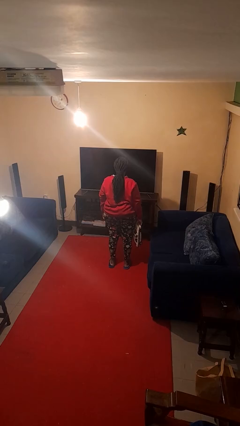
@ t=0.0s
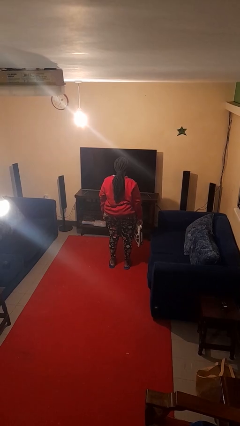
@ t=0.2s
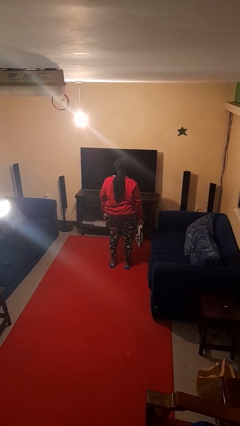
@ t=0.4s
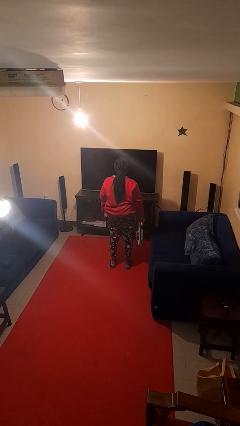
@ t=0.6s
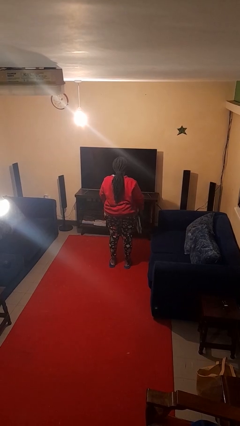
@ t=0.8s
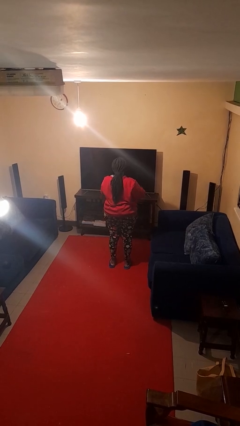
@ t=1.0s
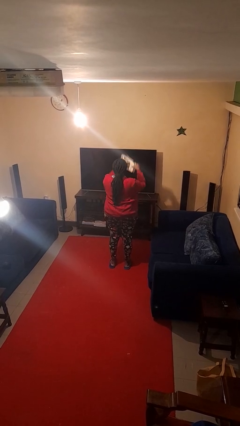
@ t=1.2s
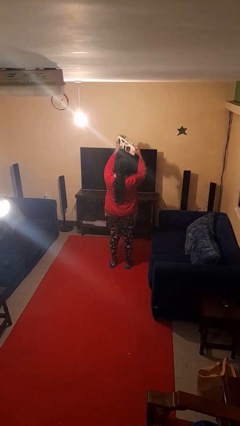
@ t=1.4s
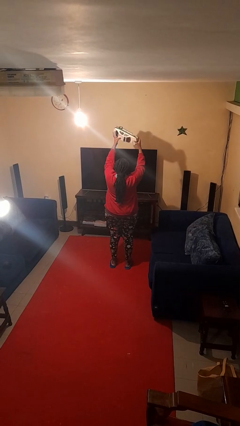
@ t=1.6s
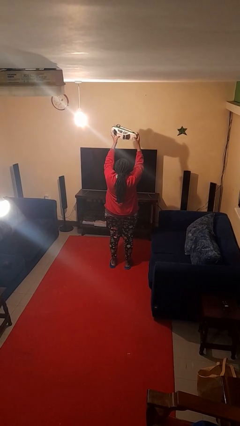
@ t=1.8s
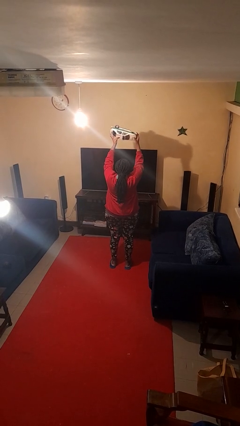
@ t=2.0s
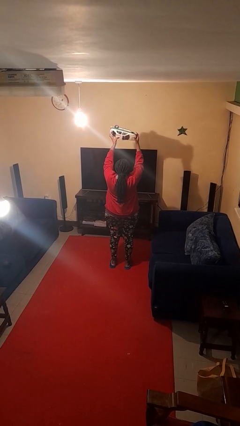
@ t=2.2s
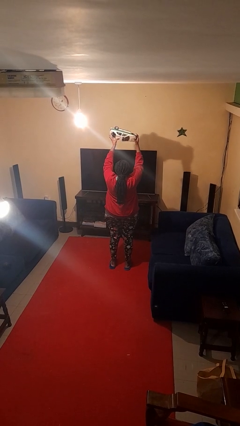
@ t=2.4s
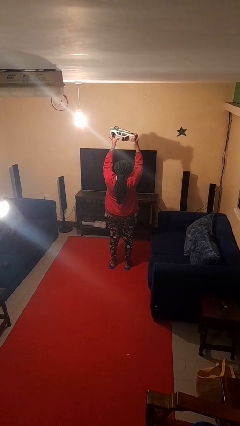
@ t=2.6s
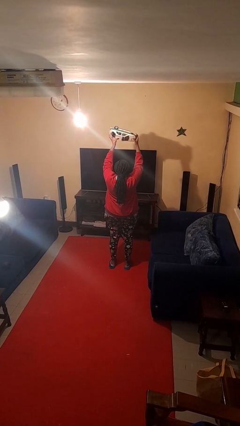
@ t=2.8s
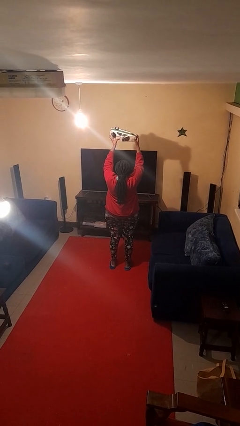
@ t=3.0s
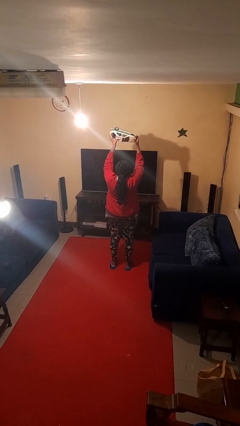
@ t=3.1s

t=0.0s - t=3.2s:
person holds object above head

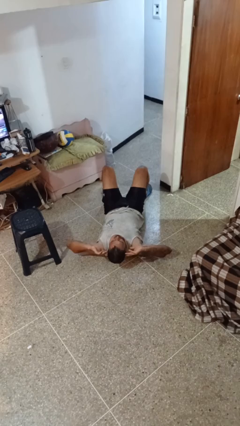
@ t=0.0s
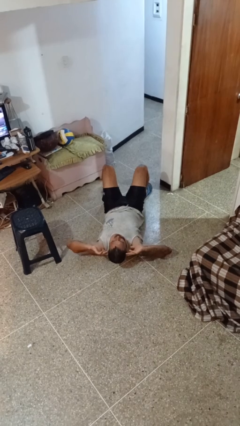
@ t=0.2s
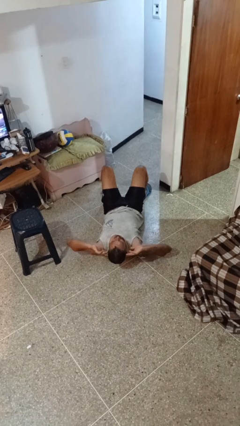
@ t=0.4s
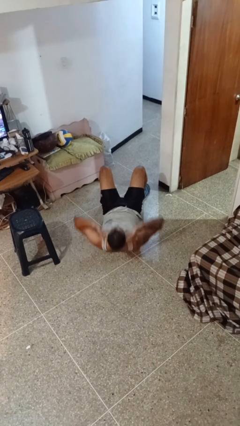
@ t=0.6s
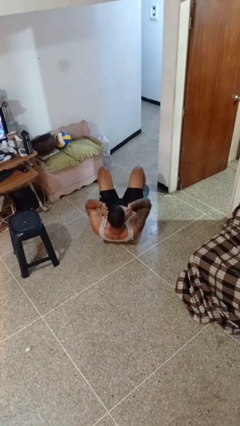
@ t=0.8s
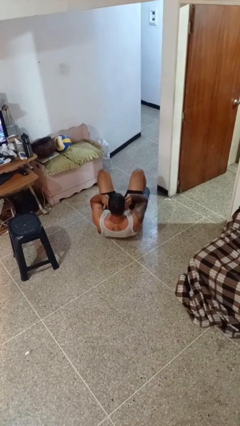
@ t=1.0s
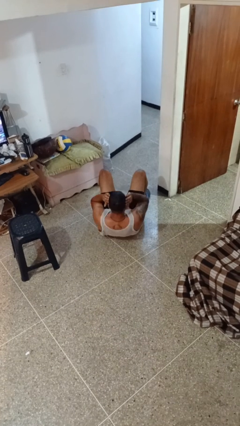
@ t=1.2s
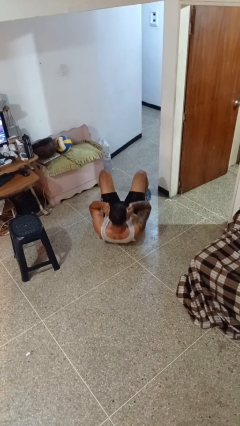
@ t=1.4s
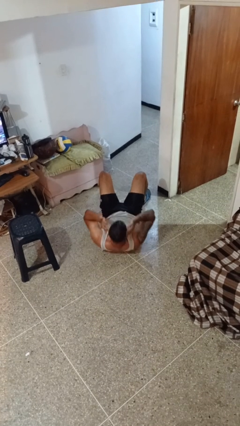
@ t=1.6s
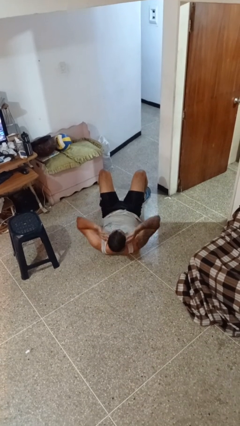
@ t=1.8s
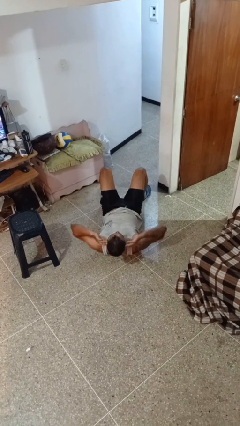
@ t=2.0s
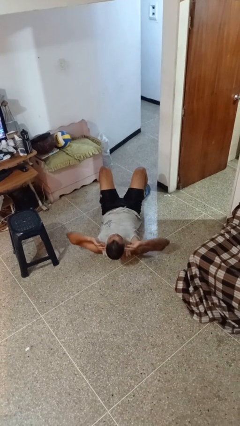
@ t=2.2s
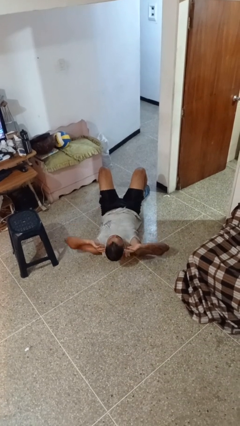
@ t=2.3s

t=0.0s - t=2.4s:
person exercises with situp

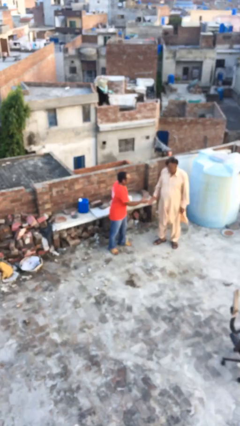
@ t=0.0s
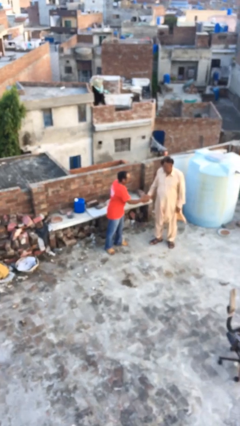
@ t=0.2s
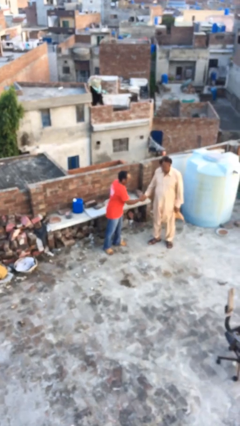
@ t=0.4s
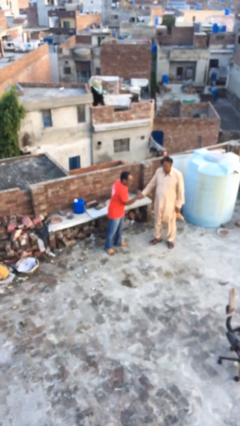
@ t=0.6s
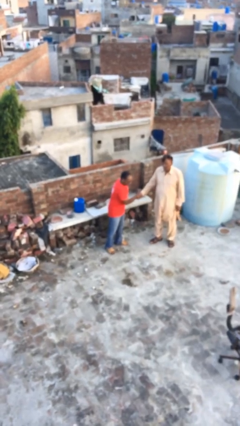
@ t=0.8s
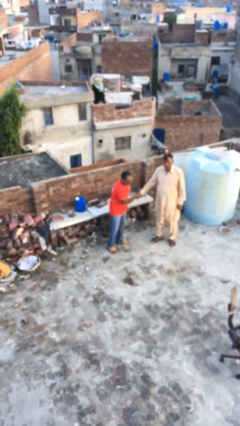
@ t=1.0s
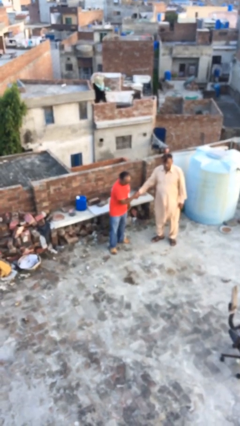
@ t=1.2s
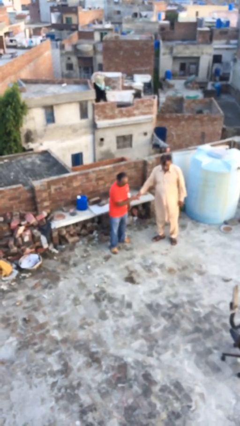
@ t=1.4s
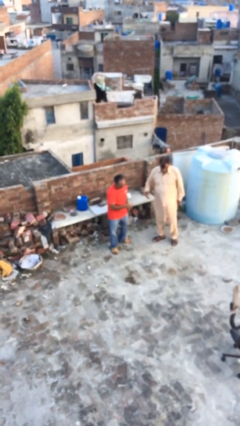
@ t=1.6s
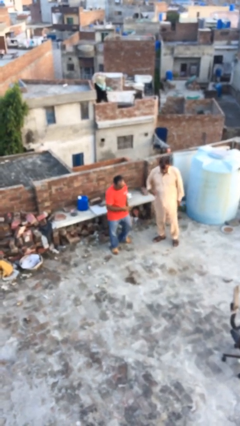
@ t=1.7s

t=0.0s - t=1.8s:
person shakes hand

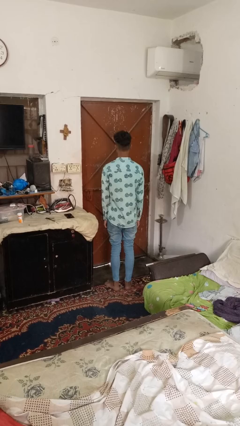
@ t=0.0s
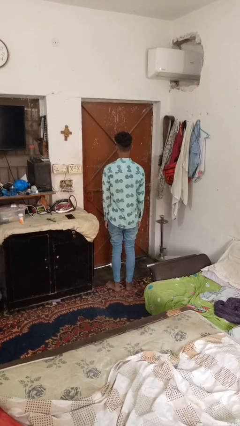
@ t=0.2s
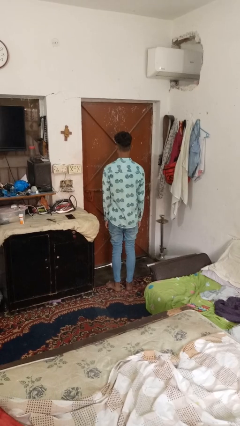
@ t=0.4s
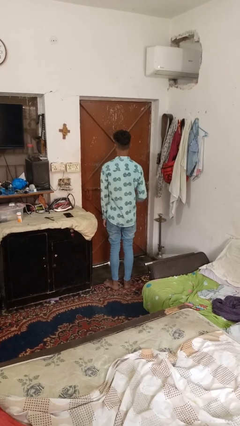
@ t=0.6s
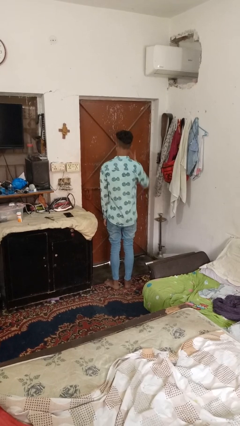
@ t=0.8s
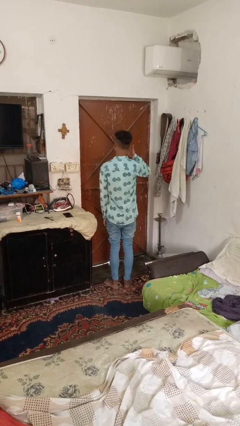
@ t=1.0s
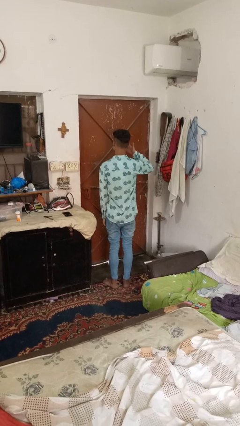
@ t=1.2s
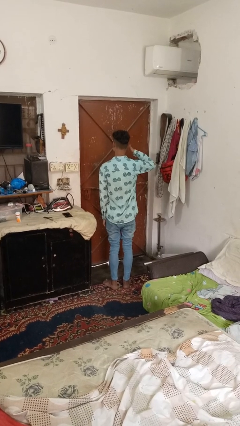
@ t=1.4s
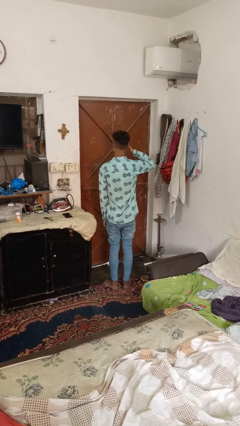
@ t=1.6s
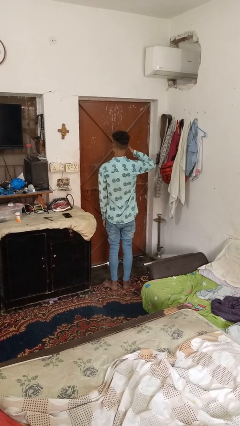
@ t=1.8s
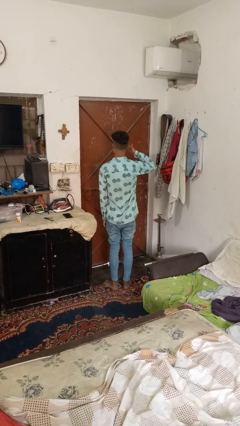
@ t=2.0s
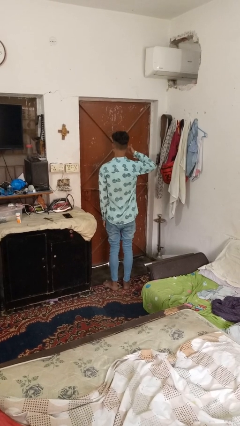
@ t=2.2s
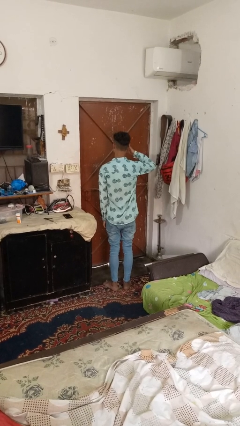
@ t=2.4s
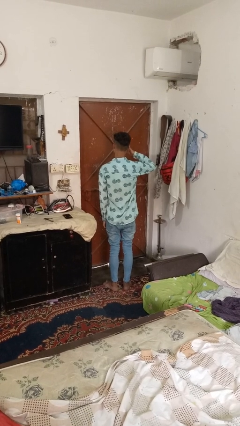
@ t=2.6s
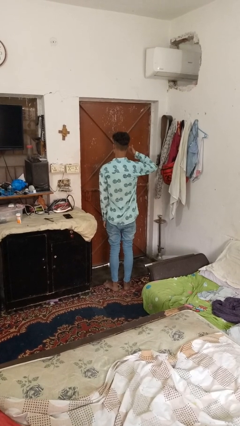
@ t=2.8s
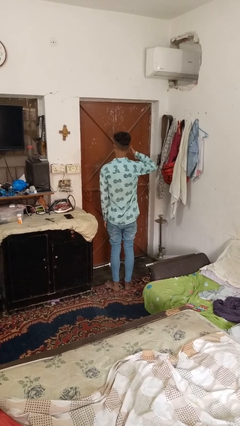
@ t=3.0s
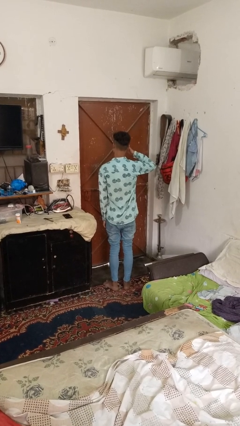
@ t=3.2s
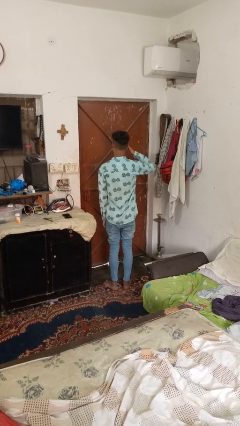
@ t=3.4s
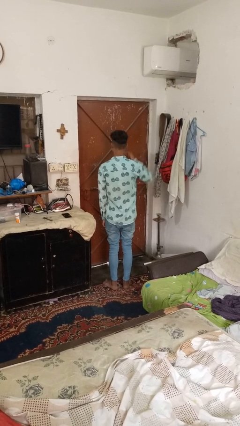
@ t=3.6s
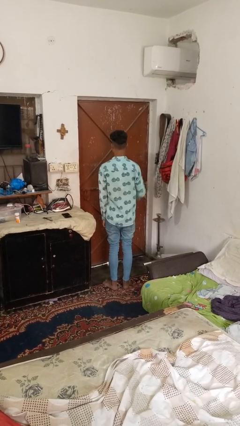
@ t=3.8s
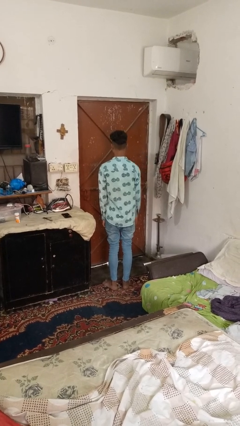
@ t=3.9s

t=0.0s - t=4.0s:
person rubs eyes

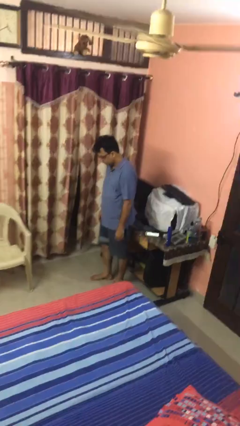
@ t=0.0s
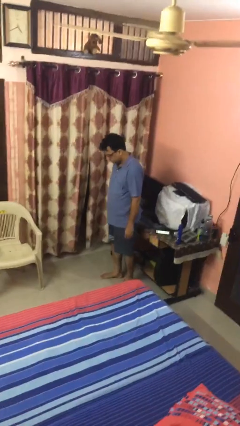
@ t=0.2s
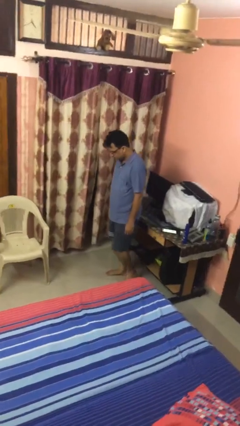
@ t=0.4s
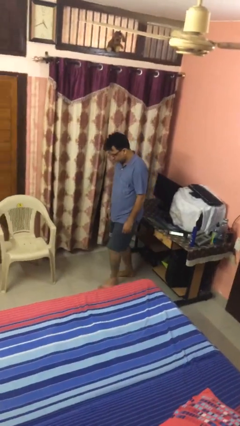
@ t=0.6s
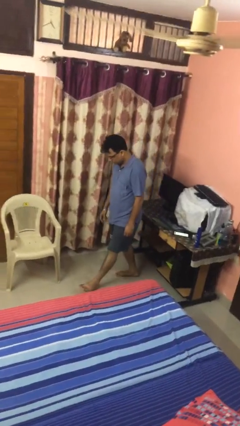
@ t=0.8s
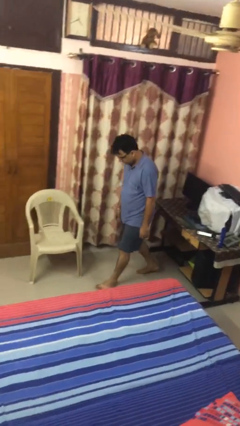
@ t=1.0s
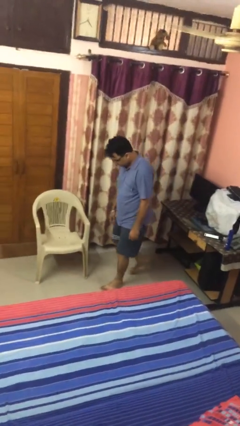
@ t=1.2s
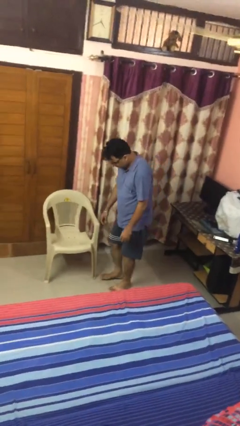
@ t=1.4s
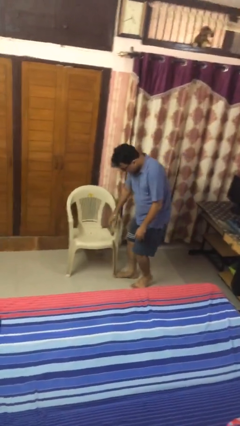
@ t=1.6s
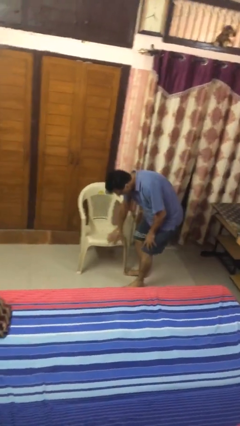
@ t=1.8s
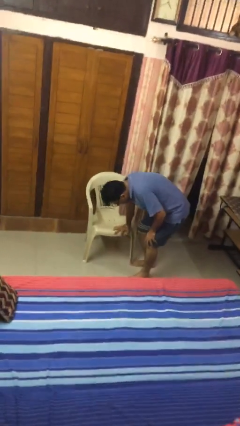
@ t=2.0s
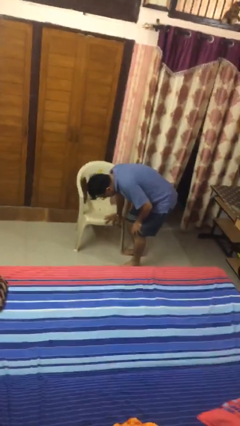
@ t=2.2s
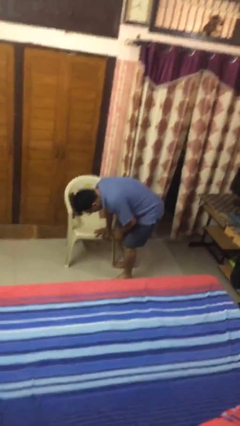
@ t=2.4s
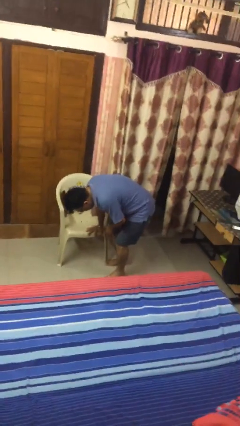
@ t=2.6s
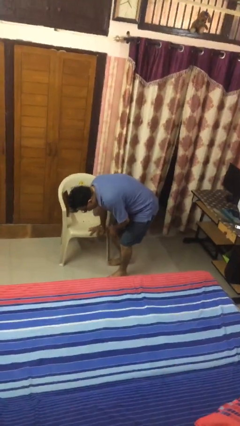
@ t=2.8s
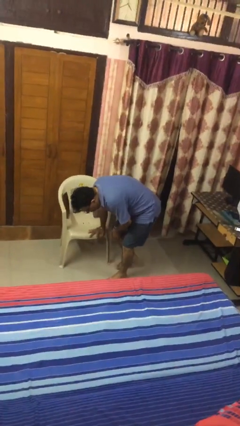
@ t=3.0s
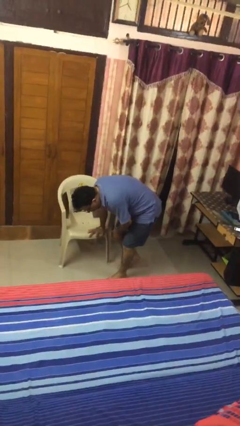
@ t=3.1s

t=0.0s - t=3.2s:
person stubs toe

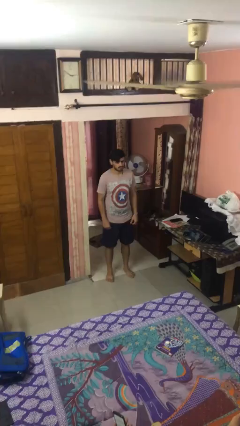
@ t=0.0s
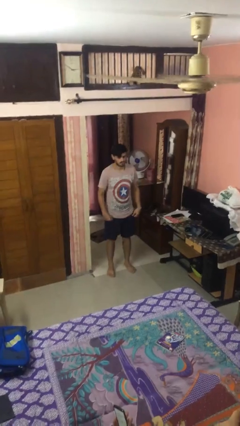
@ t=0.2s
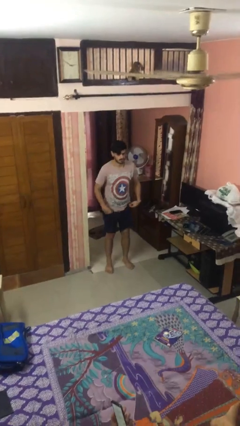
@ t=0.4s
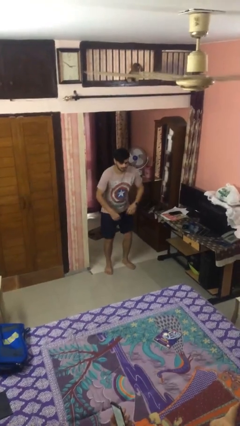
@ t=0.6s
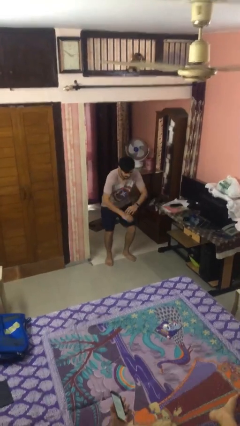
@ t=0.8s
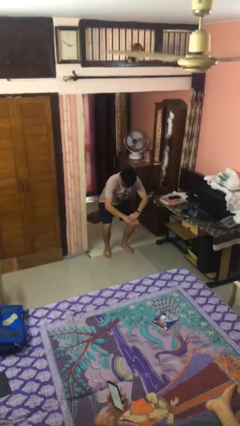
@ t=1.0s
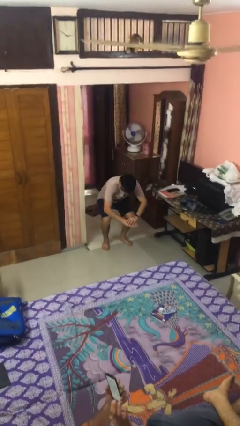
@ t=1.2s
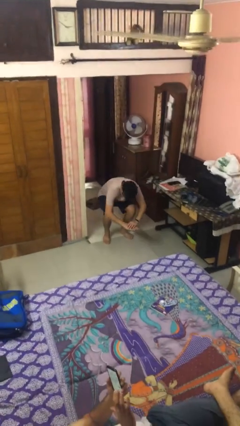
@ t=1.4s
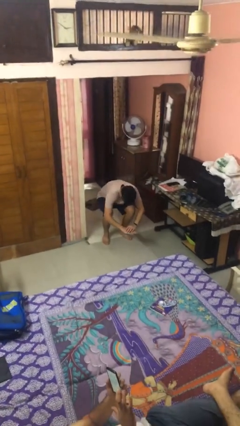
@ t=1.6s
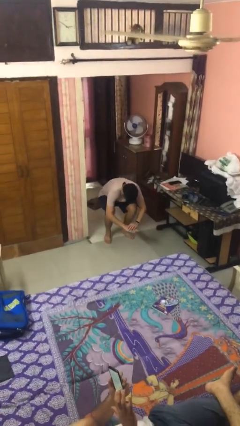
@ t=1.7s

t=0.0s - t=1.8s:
person squats

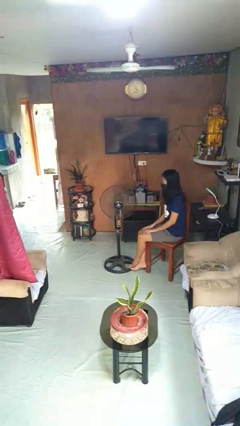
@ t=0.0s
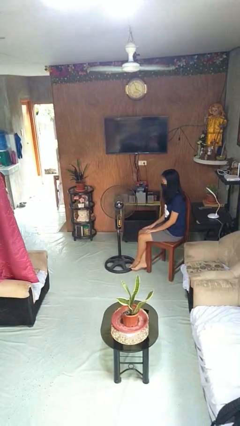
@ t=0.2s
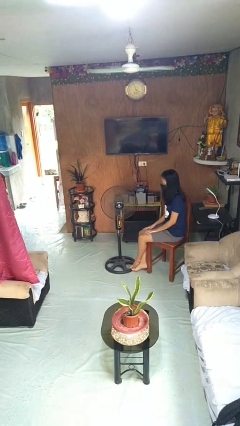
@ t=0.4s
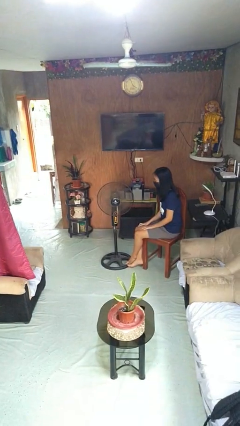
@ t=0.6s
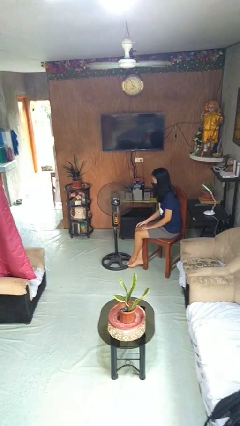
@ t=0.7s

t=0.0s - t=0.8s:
person turns off fan
